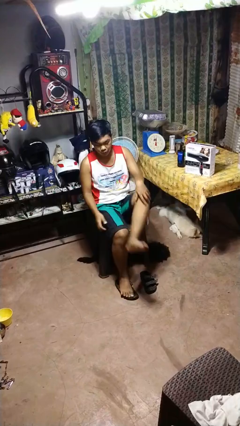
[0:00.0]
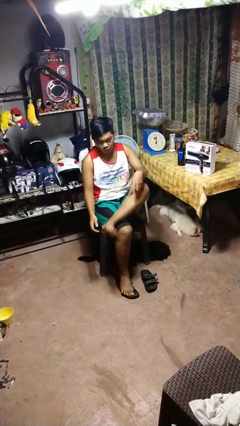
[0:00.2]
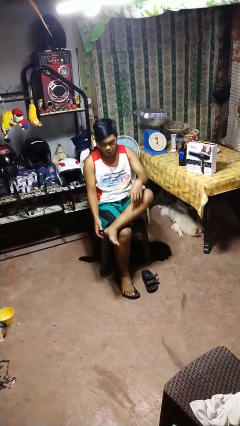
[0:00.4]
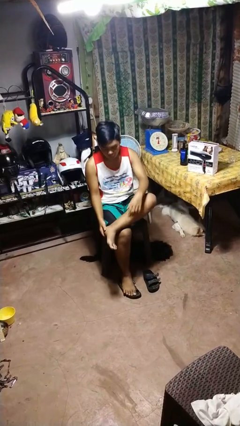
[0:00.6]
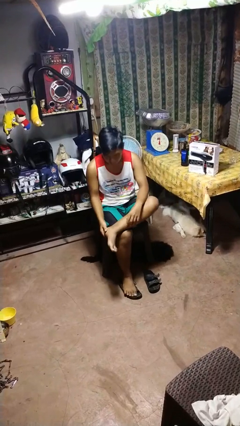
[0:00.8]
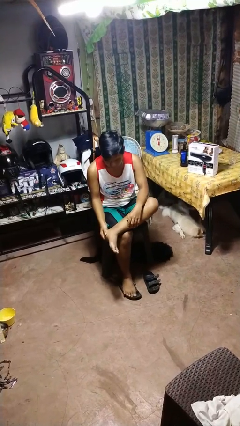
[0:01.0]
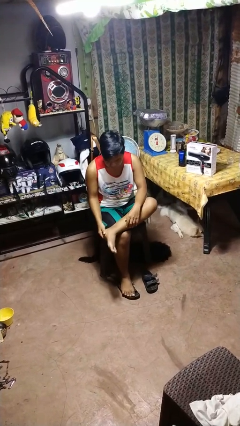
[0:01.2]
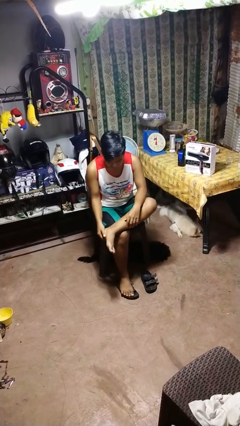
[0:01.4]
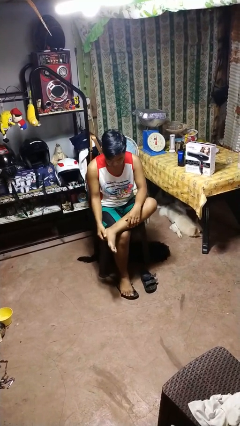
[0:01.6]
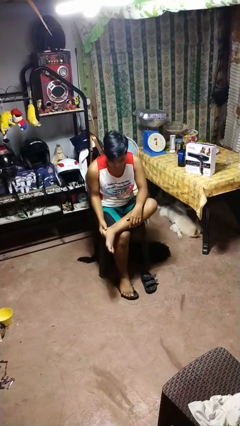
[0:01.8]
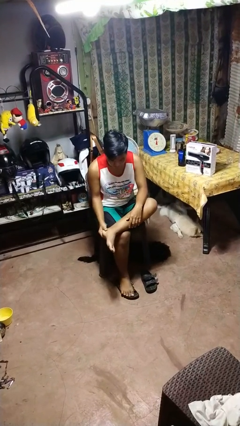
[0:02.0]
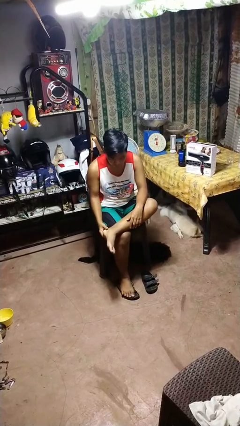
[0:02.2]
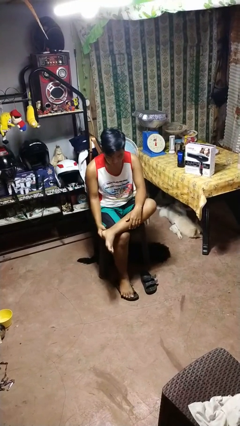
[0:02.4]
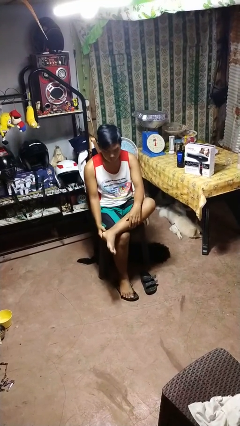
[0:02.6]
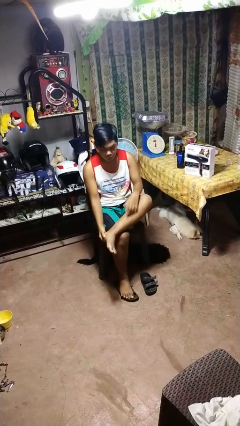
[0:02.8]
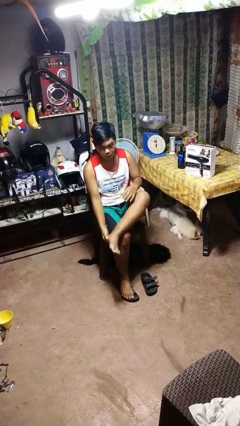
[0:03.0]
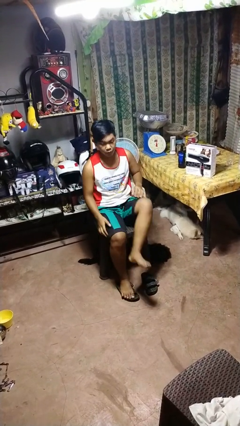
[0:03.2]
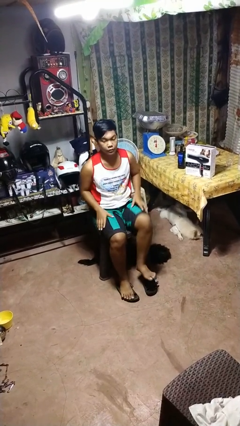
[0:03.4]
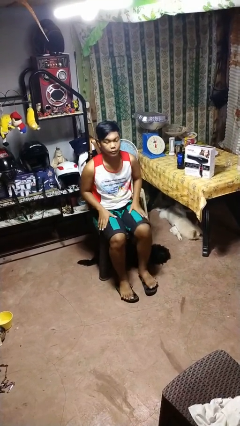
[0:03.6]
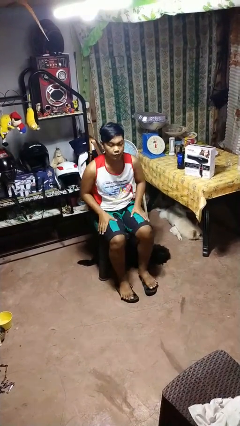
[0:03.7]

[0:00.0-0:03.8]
person rubs foot

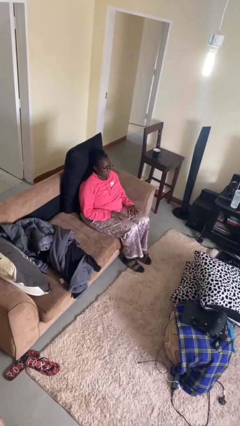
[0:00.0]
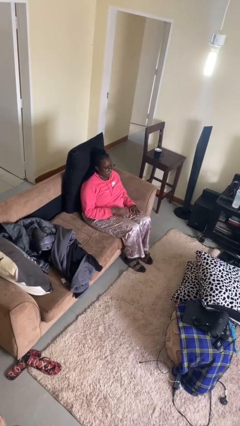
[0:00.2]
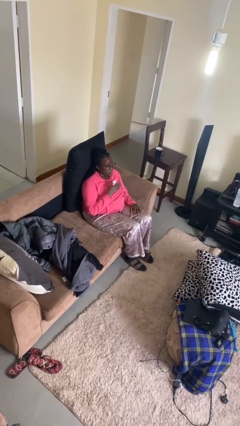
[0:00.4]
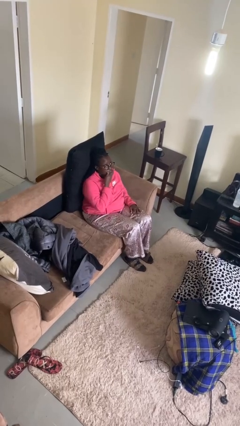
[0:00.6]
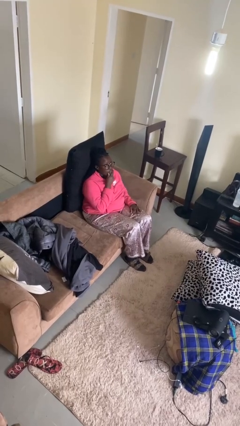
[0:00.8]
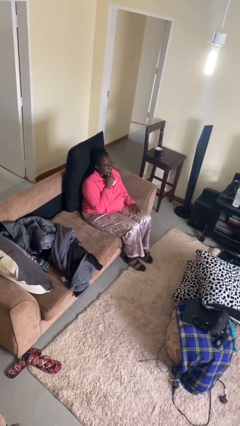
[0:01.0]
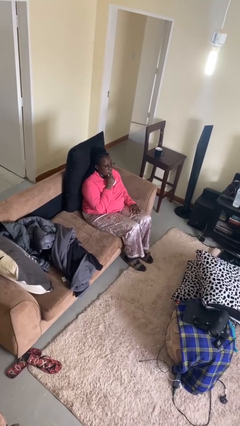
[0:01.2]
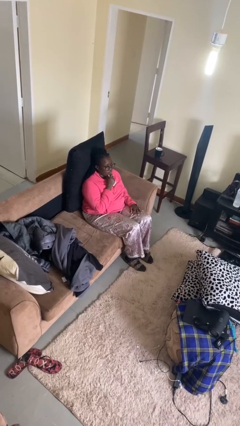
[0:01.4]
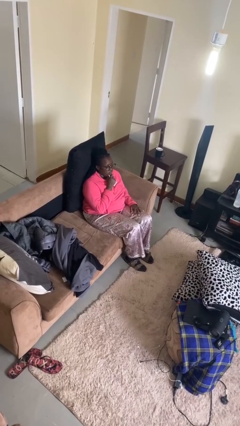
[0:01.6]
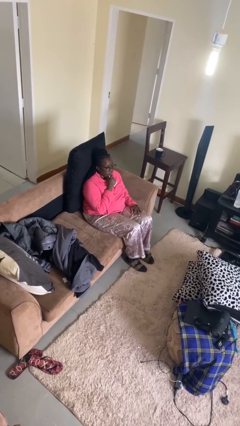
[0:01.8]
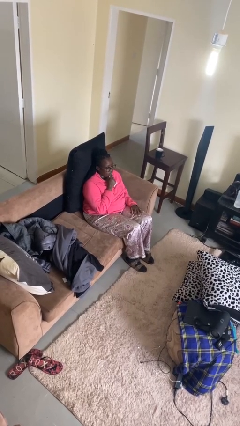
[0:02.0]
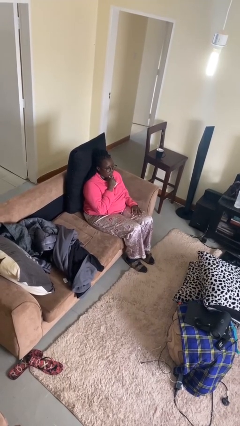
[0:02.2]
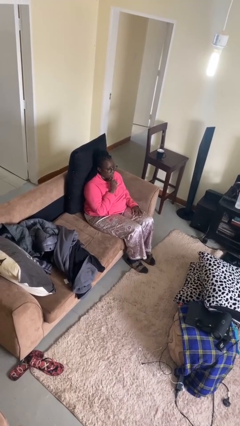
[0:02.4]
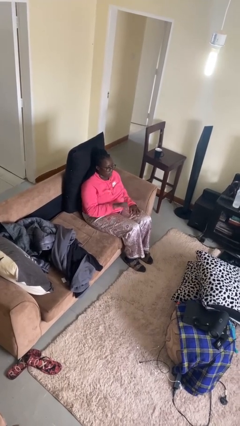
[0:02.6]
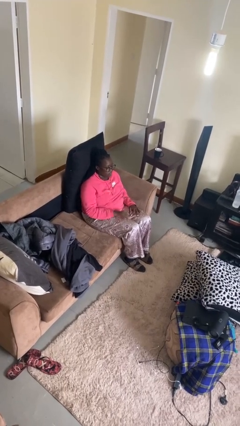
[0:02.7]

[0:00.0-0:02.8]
person strokes chin

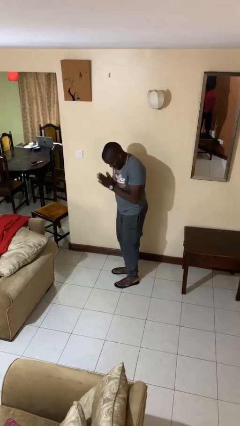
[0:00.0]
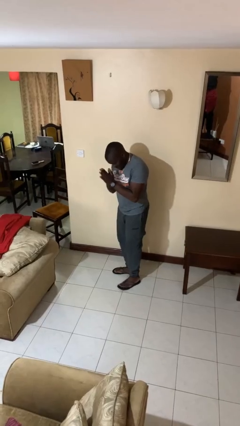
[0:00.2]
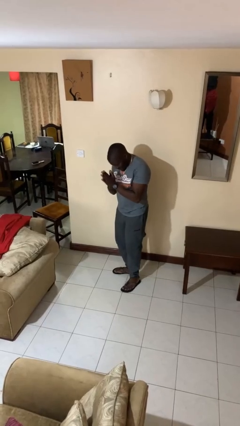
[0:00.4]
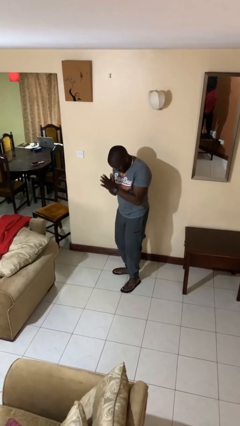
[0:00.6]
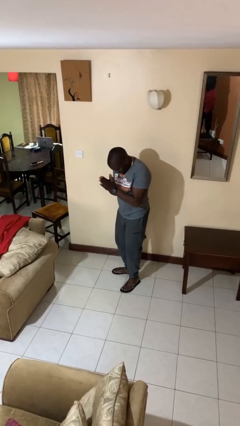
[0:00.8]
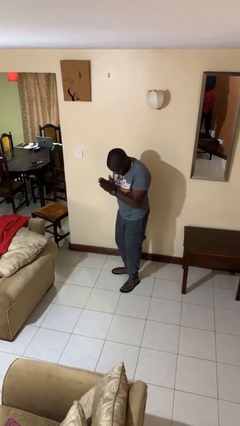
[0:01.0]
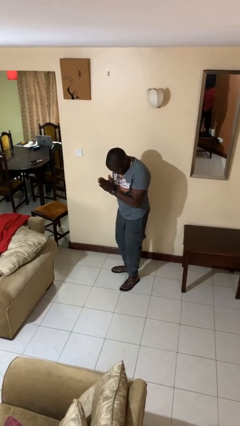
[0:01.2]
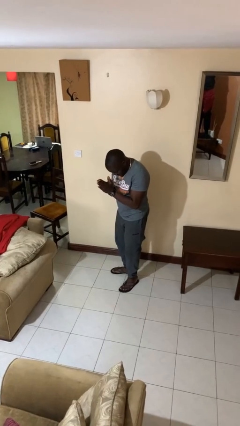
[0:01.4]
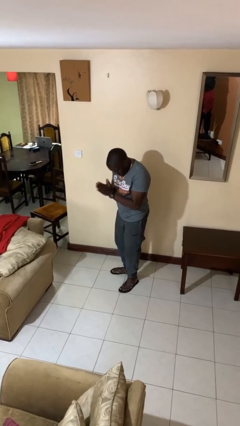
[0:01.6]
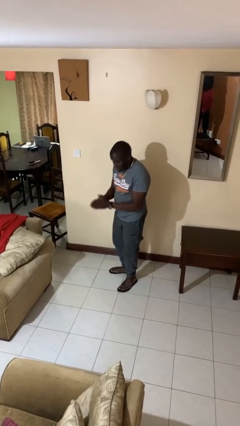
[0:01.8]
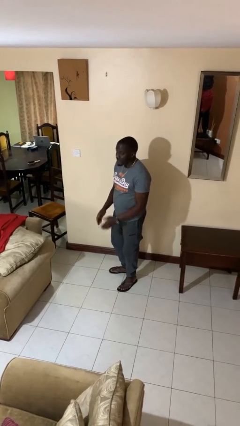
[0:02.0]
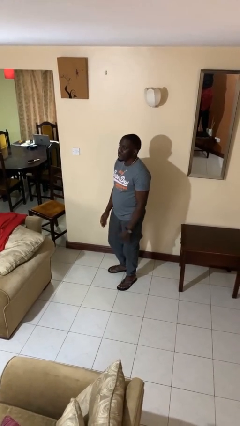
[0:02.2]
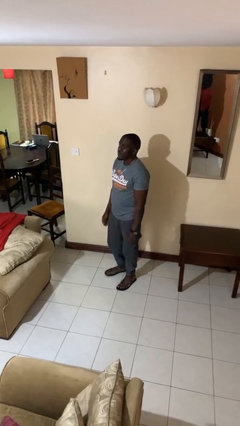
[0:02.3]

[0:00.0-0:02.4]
person prays

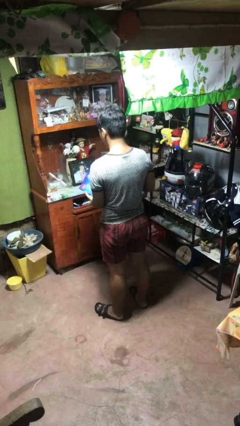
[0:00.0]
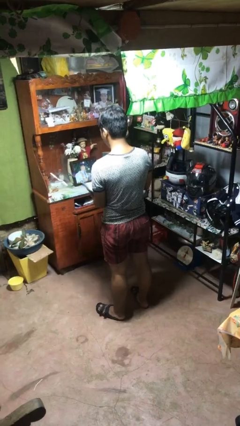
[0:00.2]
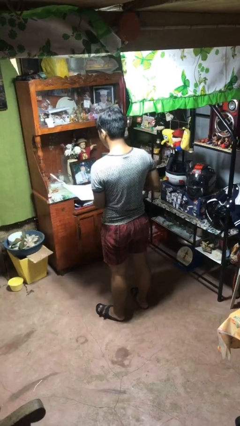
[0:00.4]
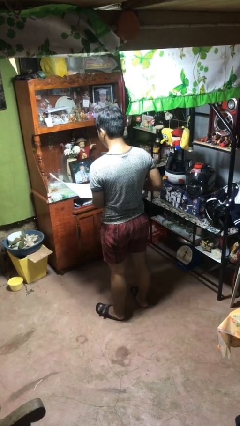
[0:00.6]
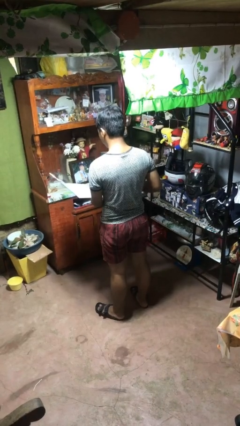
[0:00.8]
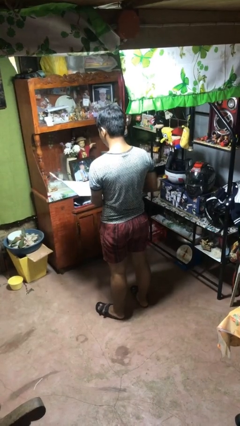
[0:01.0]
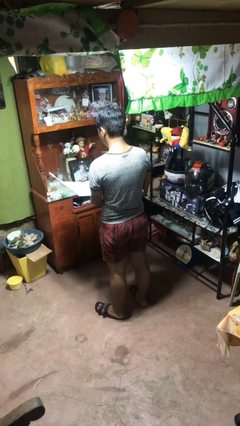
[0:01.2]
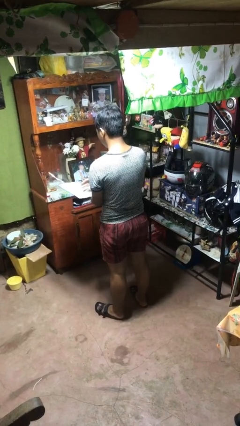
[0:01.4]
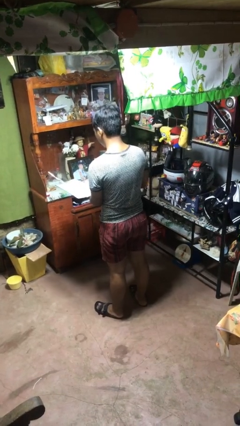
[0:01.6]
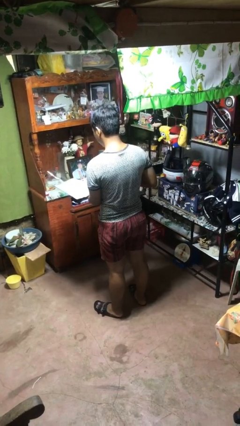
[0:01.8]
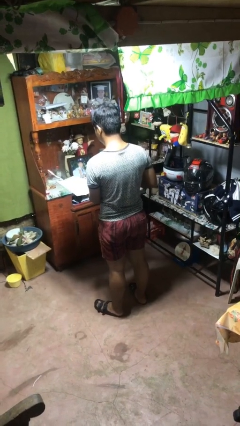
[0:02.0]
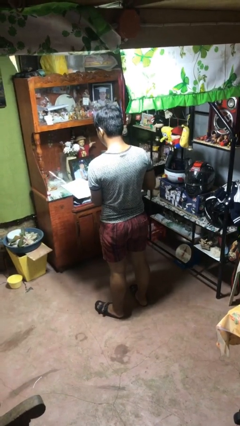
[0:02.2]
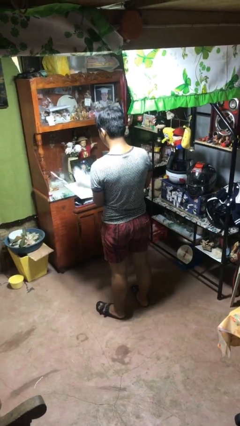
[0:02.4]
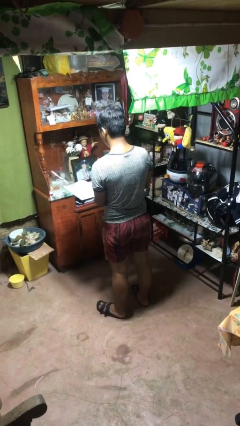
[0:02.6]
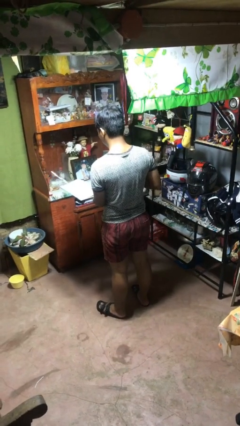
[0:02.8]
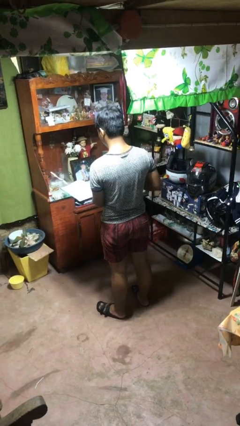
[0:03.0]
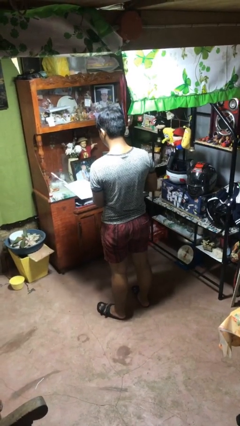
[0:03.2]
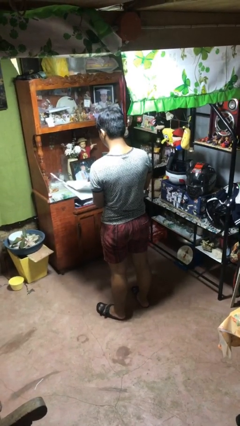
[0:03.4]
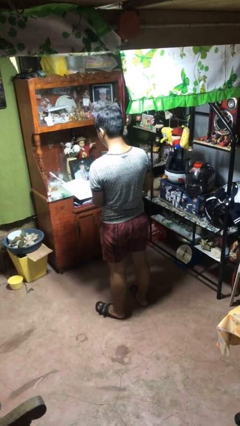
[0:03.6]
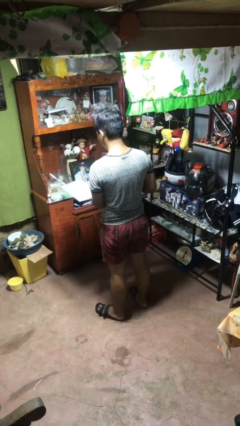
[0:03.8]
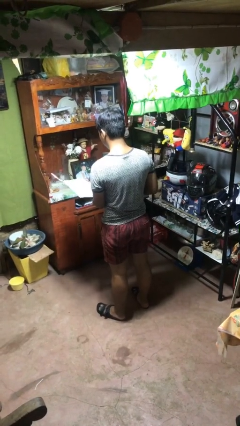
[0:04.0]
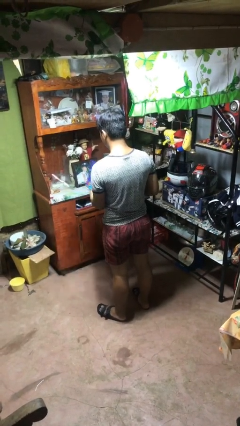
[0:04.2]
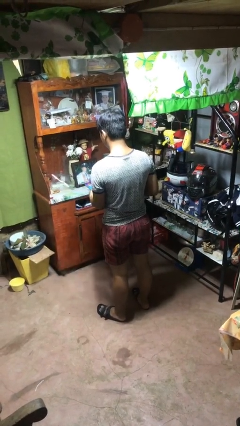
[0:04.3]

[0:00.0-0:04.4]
person reads magazine

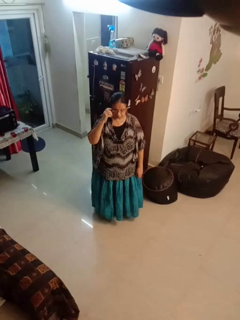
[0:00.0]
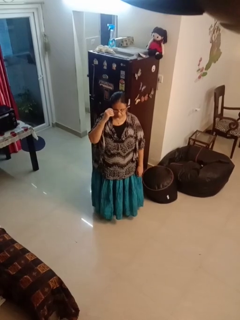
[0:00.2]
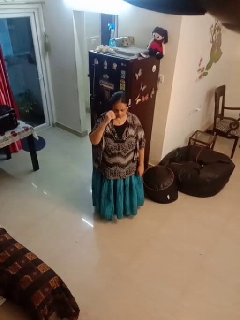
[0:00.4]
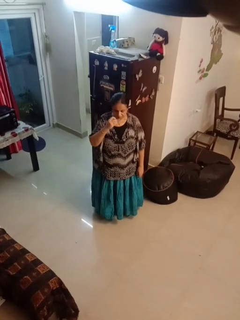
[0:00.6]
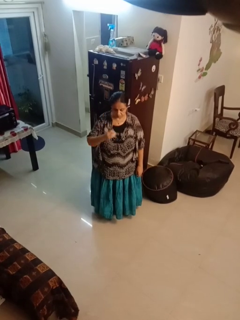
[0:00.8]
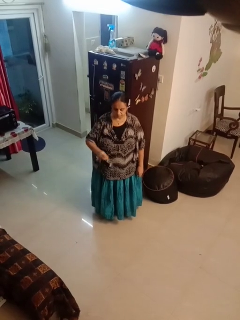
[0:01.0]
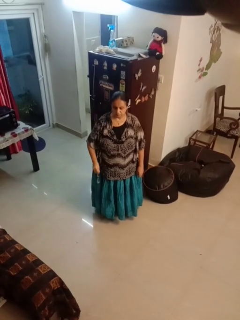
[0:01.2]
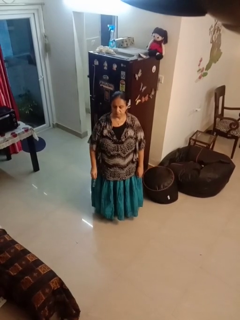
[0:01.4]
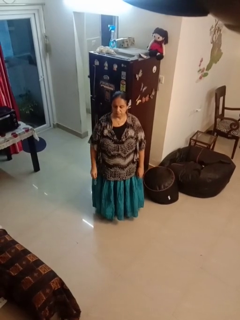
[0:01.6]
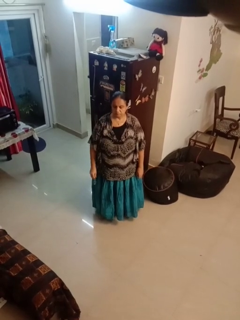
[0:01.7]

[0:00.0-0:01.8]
person takes off glasses

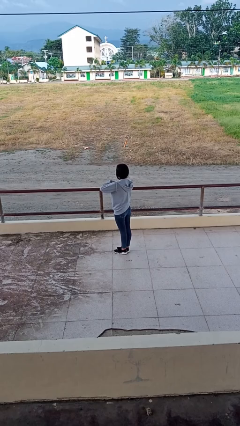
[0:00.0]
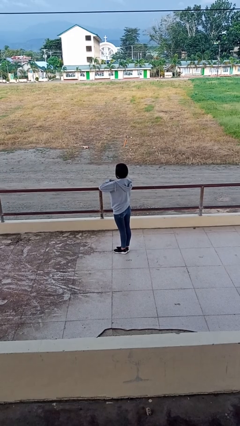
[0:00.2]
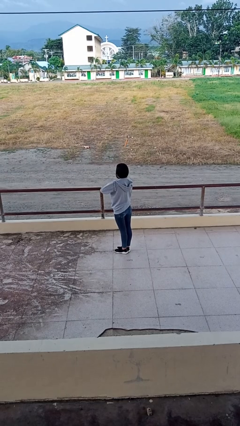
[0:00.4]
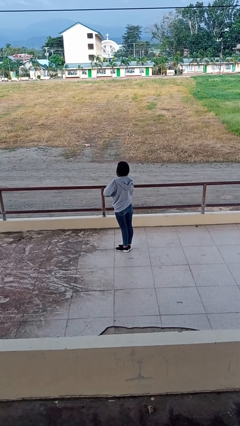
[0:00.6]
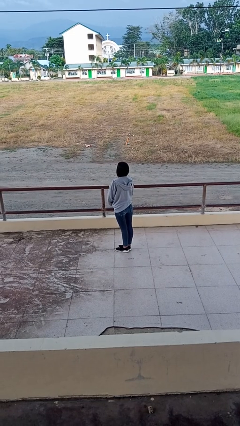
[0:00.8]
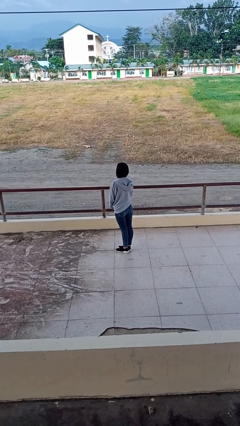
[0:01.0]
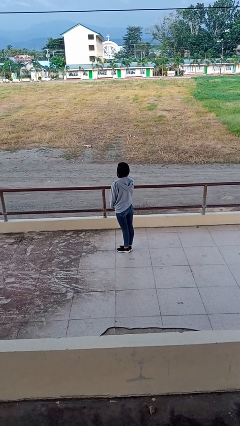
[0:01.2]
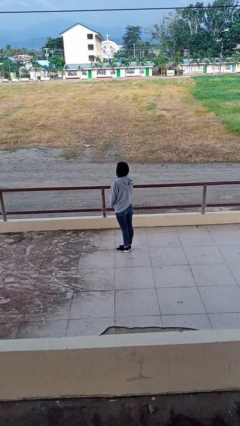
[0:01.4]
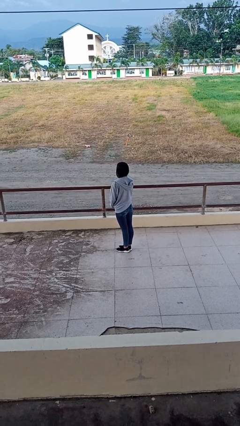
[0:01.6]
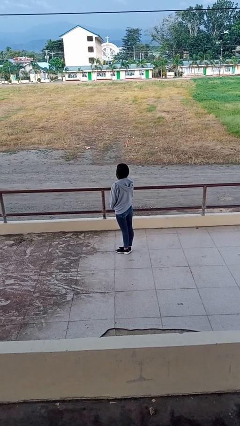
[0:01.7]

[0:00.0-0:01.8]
person unzips jacket

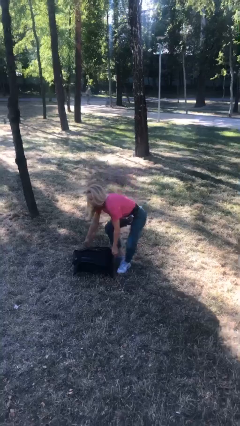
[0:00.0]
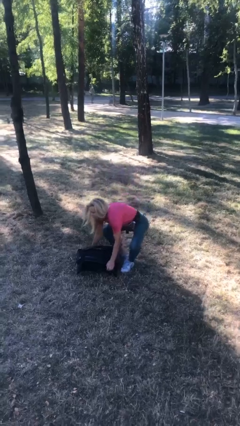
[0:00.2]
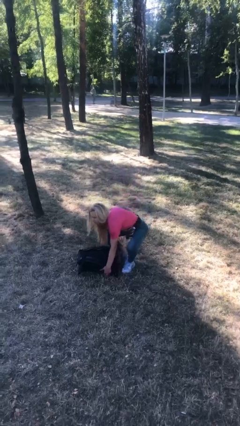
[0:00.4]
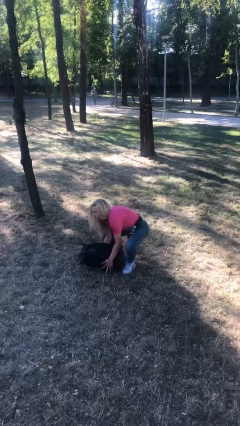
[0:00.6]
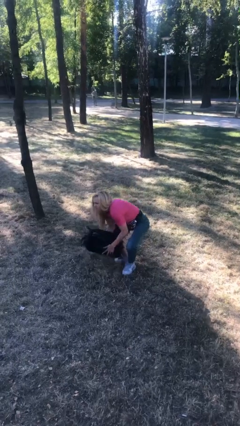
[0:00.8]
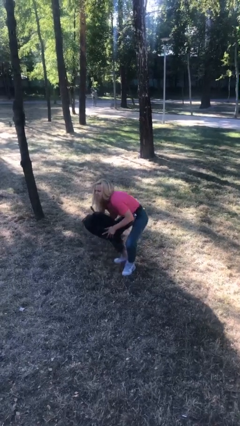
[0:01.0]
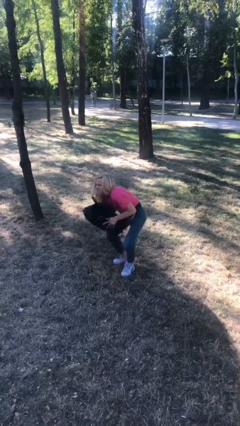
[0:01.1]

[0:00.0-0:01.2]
person picks up object from floor
